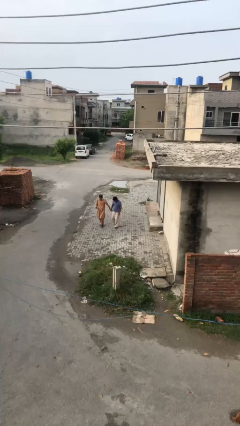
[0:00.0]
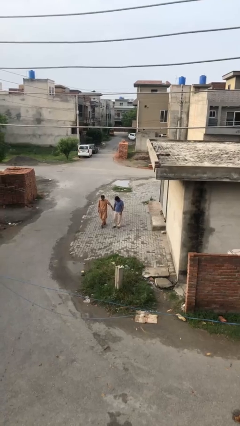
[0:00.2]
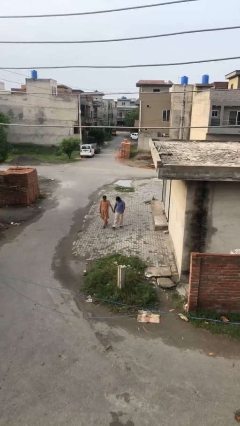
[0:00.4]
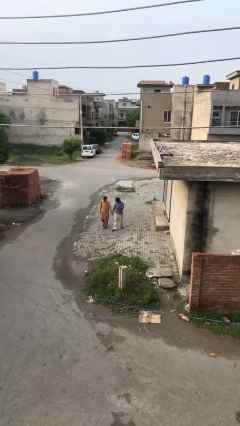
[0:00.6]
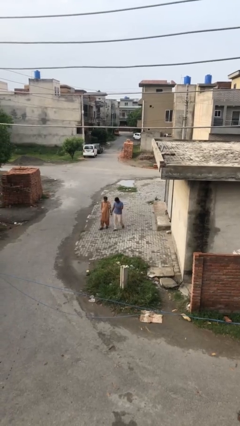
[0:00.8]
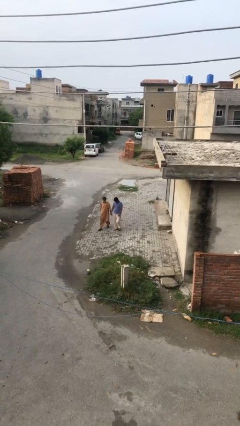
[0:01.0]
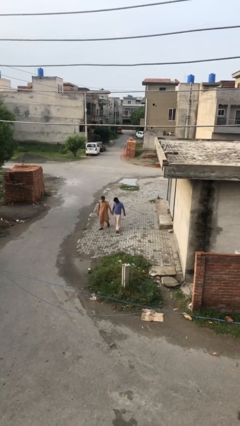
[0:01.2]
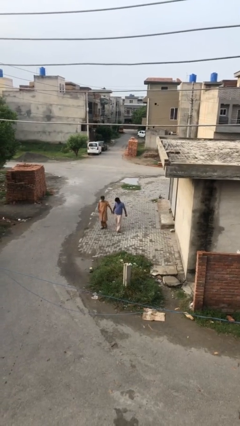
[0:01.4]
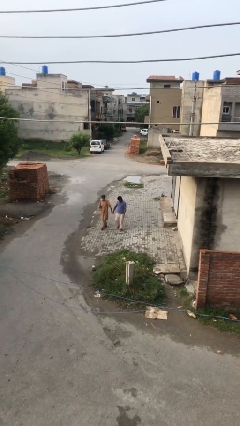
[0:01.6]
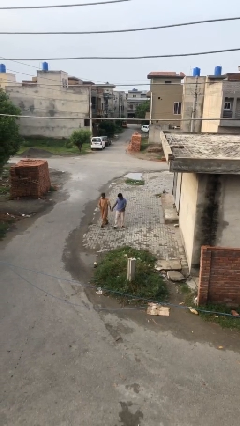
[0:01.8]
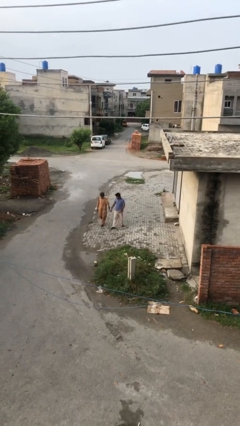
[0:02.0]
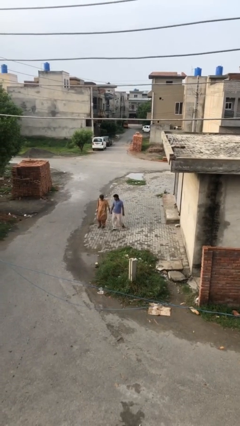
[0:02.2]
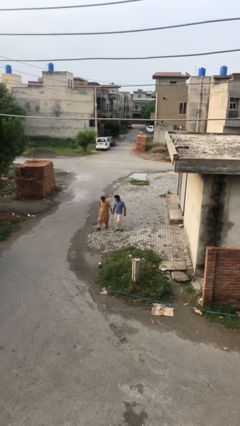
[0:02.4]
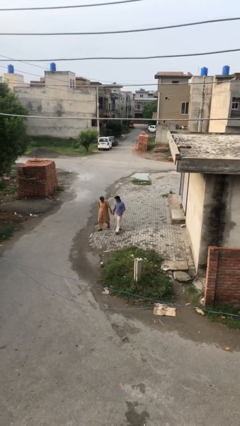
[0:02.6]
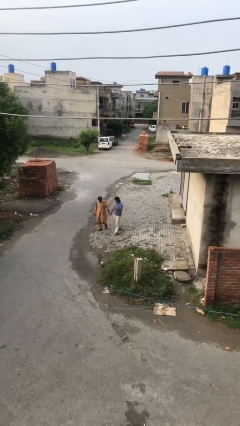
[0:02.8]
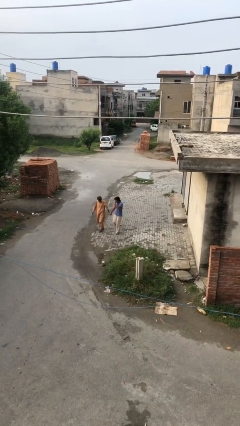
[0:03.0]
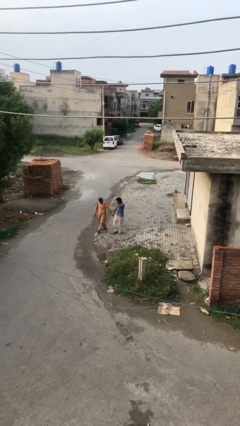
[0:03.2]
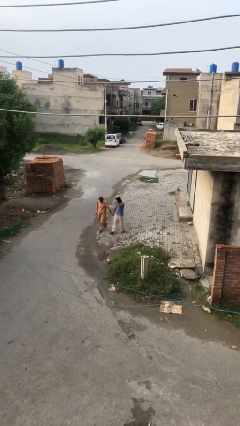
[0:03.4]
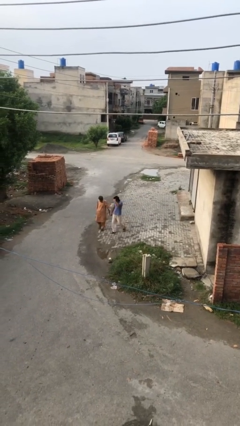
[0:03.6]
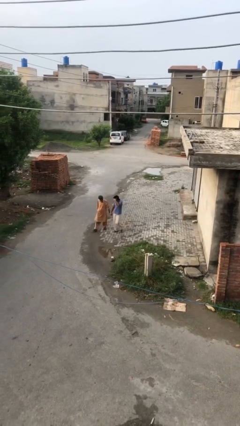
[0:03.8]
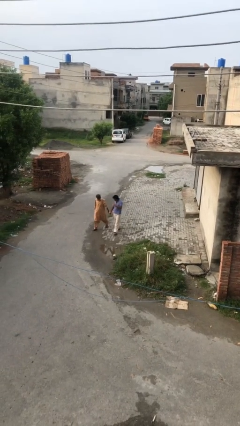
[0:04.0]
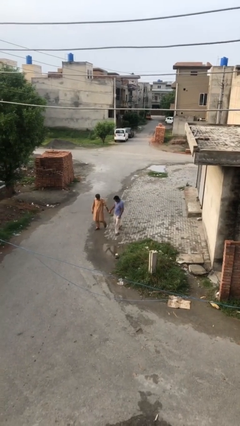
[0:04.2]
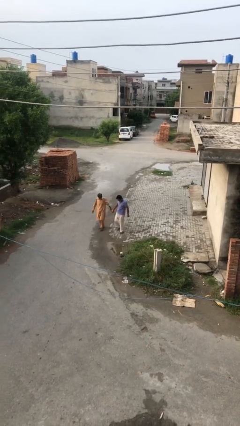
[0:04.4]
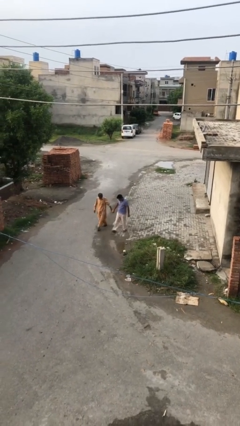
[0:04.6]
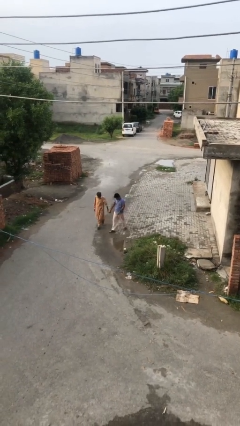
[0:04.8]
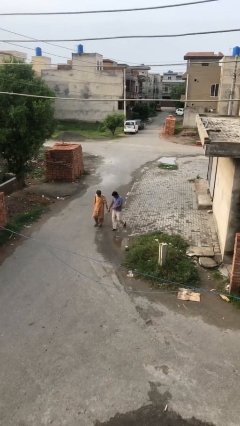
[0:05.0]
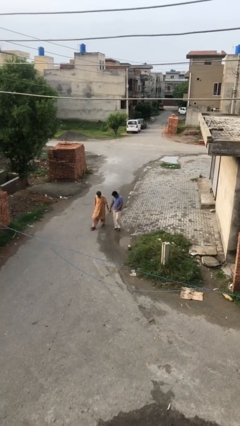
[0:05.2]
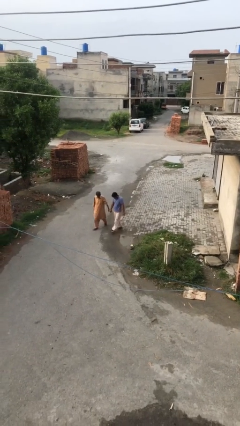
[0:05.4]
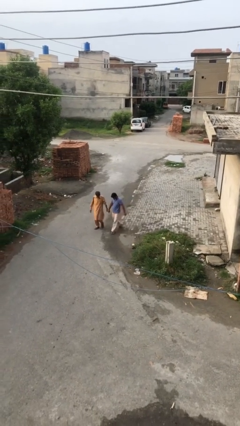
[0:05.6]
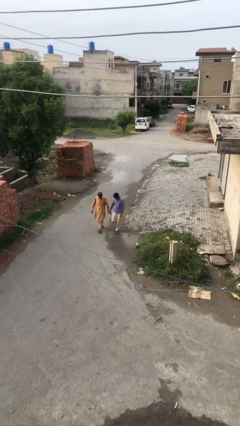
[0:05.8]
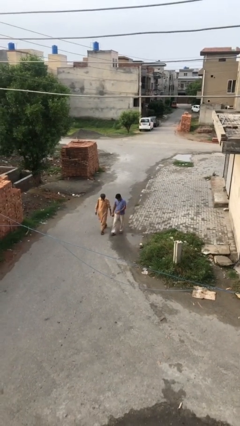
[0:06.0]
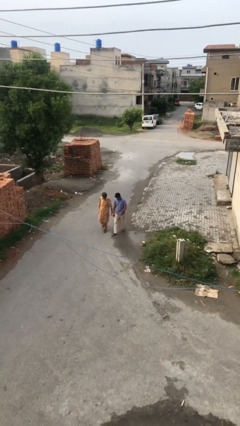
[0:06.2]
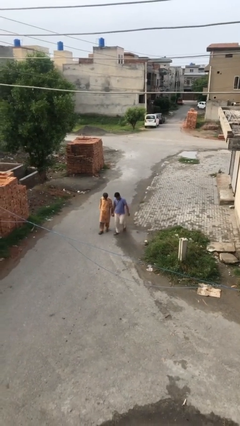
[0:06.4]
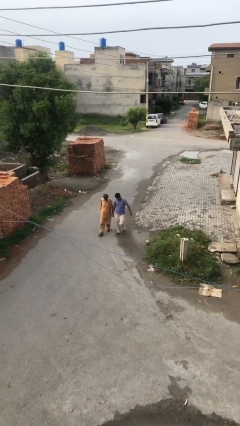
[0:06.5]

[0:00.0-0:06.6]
person holds hand

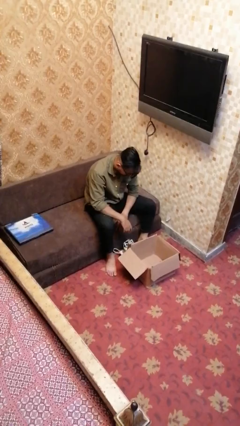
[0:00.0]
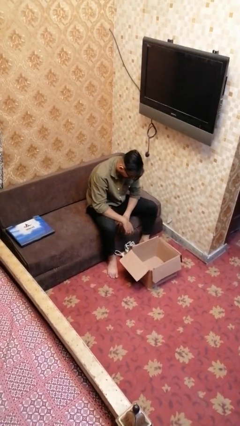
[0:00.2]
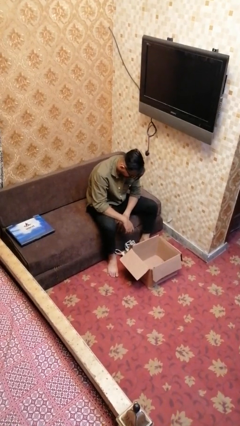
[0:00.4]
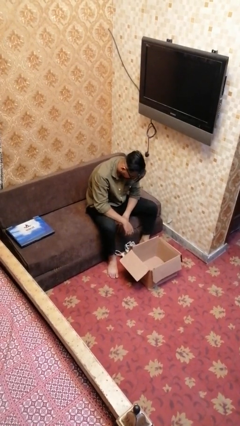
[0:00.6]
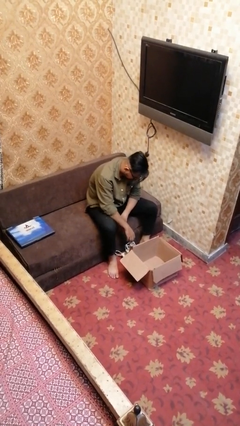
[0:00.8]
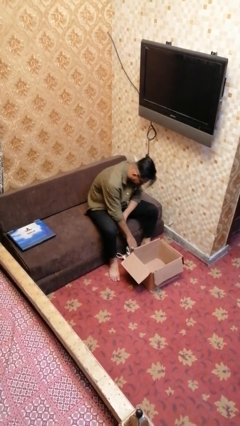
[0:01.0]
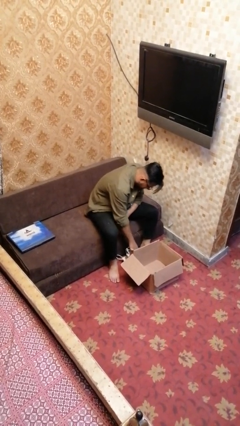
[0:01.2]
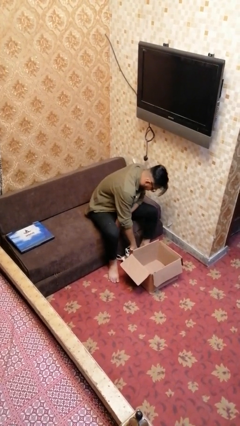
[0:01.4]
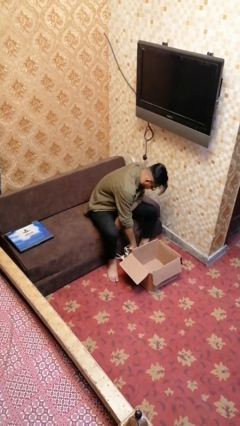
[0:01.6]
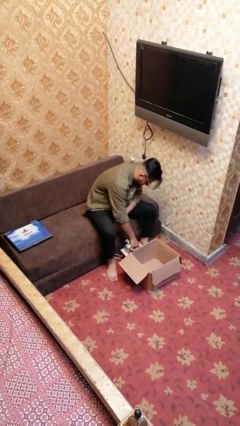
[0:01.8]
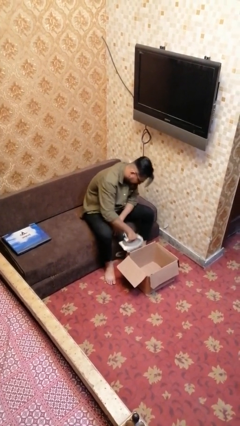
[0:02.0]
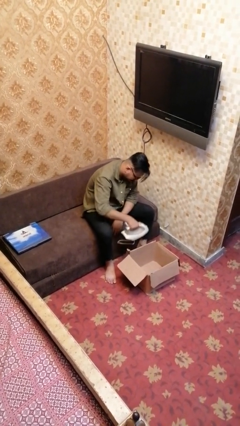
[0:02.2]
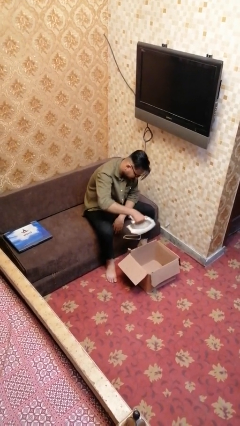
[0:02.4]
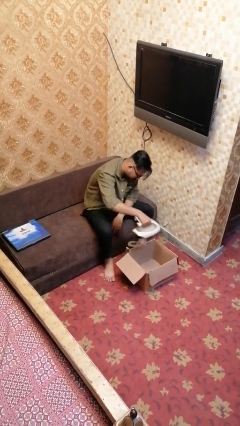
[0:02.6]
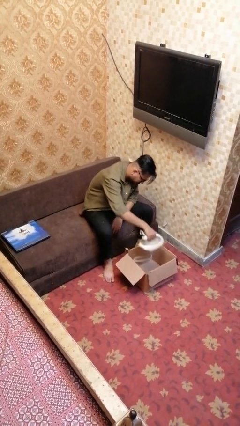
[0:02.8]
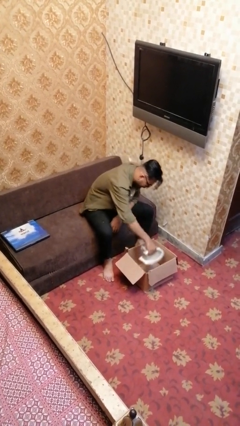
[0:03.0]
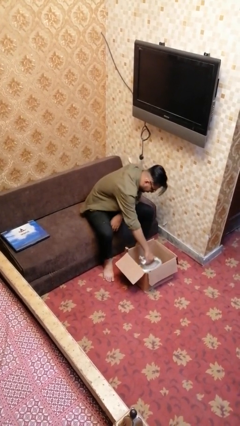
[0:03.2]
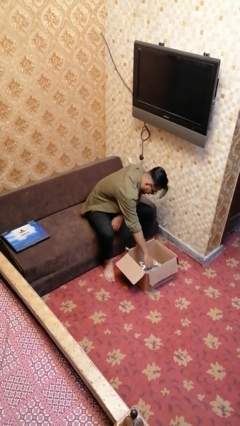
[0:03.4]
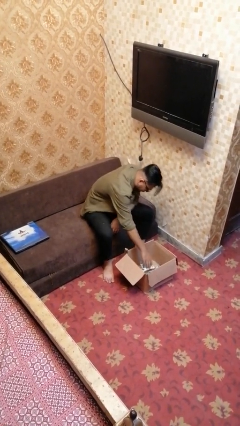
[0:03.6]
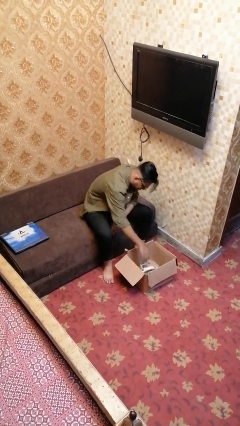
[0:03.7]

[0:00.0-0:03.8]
person puts object into box

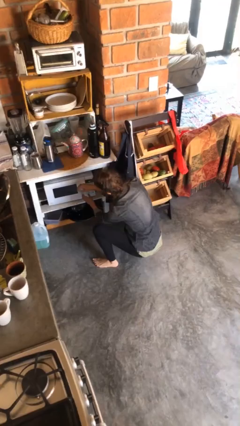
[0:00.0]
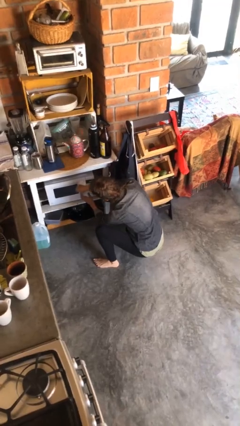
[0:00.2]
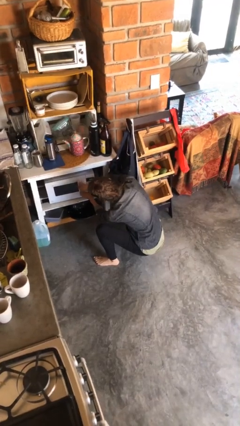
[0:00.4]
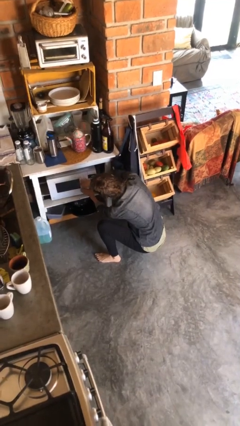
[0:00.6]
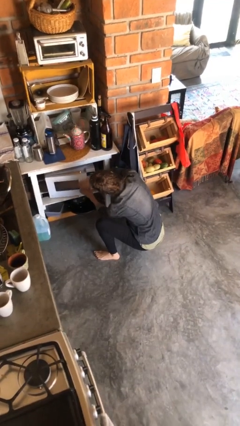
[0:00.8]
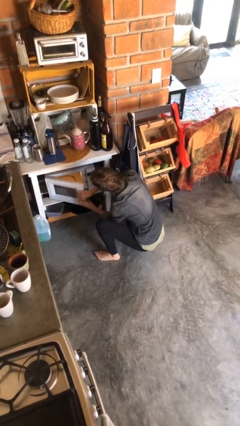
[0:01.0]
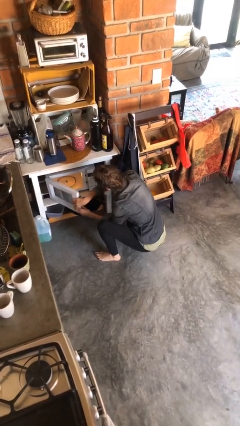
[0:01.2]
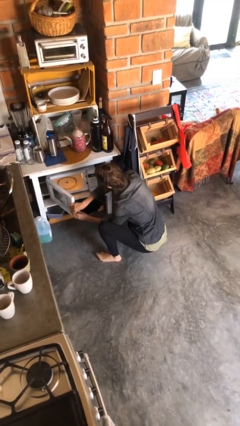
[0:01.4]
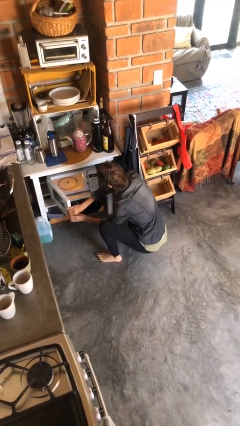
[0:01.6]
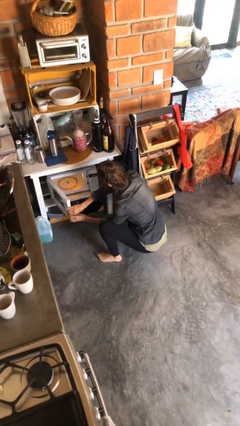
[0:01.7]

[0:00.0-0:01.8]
person opens microwave

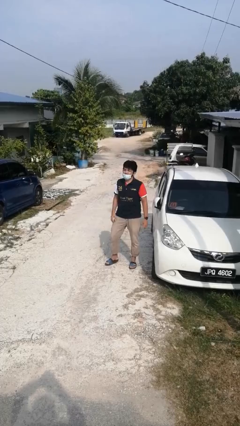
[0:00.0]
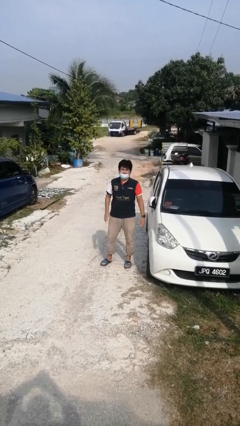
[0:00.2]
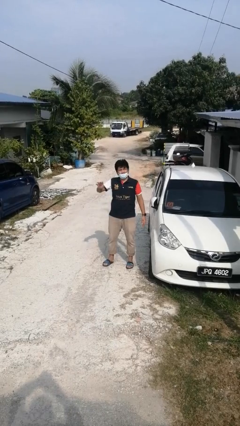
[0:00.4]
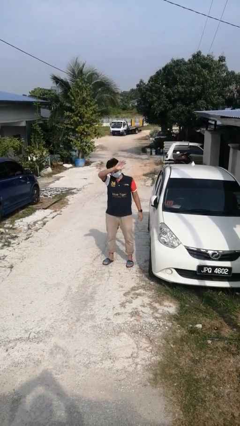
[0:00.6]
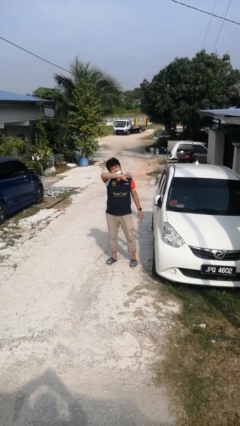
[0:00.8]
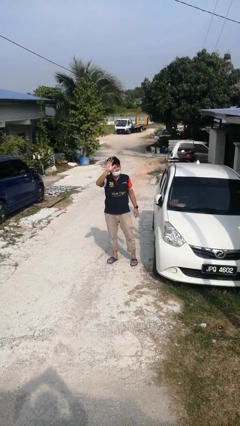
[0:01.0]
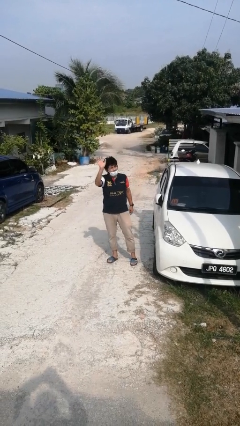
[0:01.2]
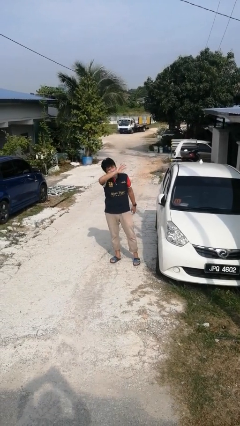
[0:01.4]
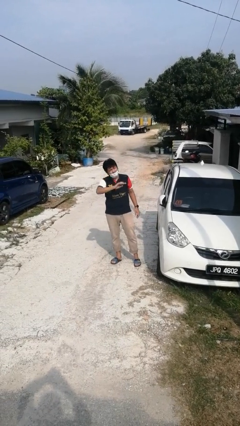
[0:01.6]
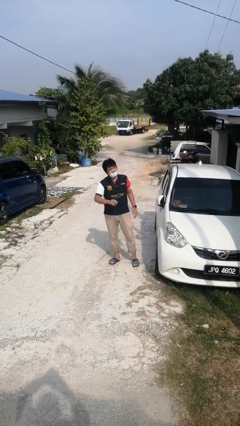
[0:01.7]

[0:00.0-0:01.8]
person waves at person

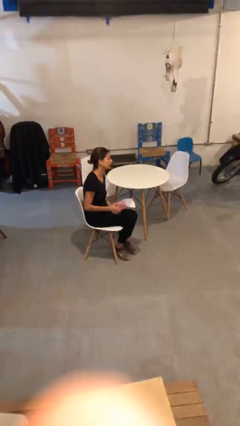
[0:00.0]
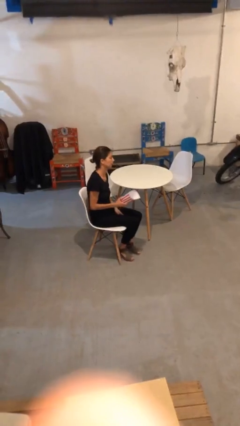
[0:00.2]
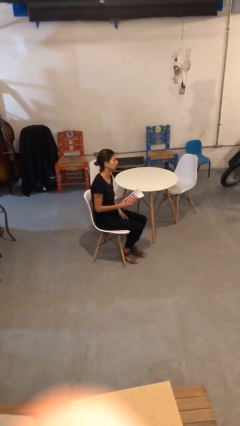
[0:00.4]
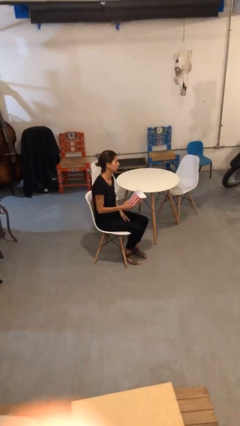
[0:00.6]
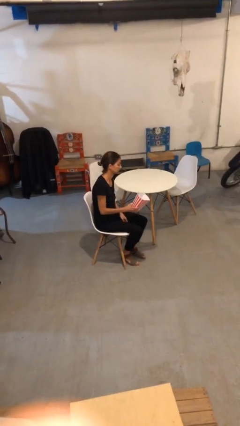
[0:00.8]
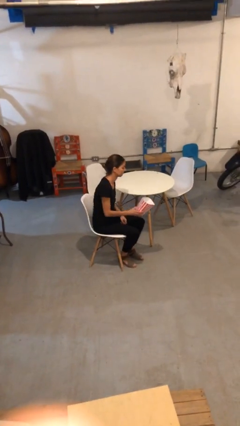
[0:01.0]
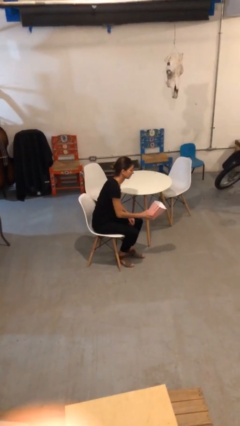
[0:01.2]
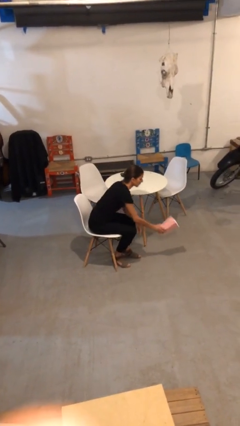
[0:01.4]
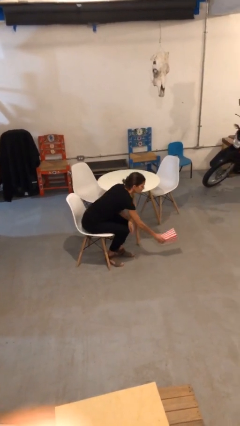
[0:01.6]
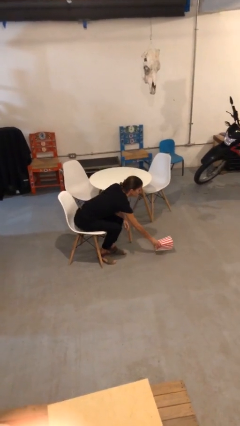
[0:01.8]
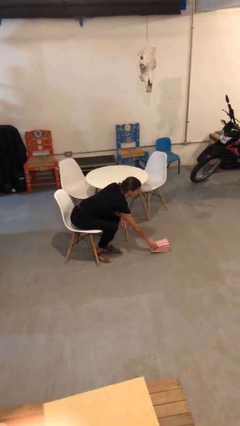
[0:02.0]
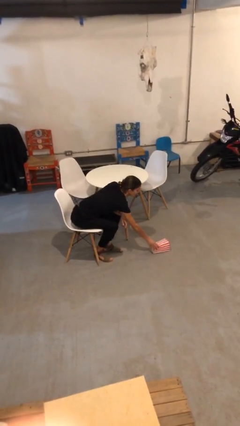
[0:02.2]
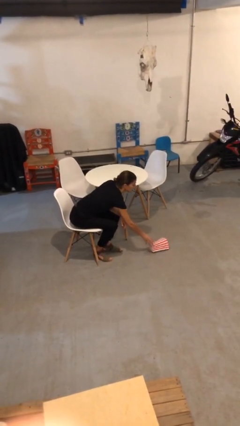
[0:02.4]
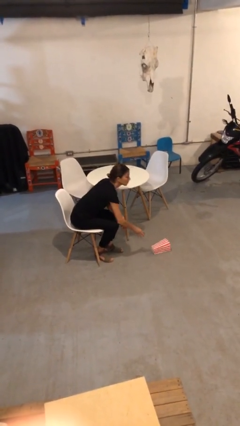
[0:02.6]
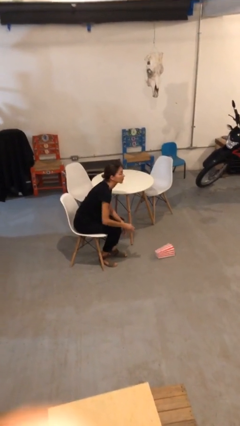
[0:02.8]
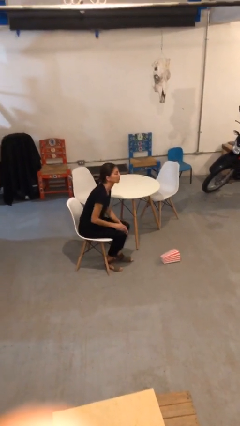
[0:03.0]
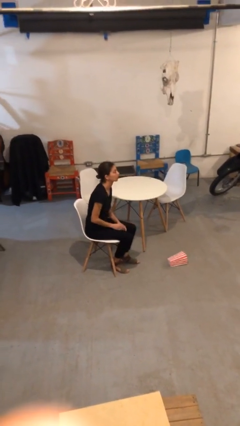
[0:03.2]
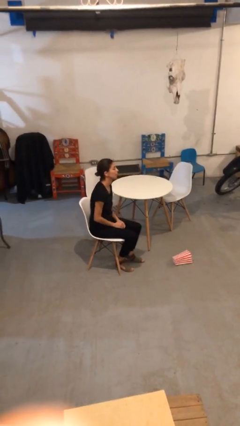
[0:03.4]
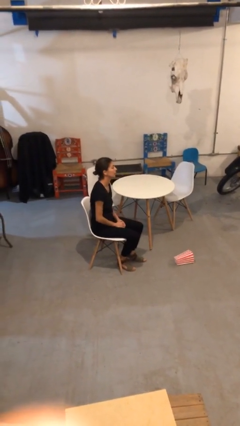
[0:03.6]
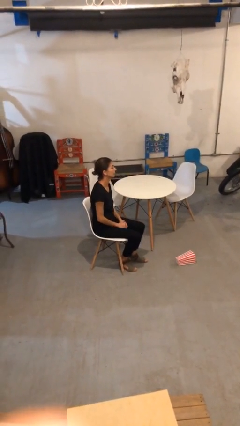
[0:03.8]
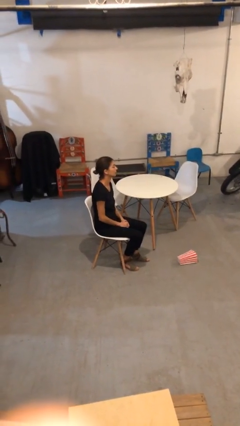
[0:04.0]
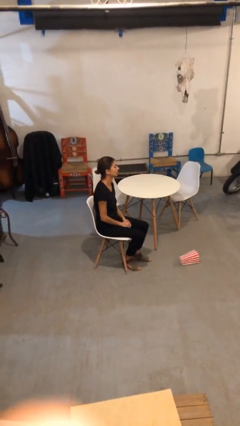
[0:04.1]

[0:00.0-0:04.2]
person puts down object on floor
